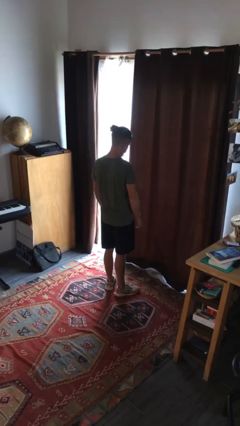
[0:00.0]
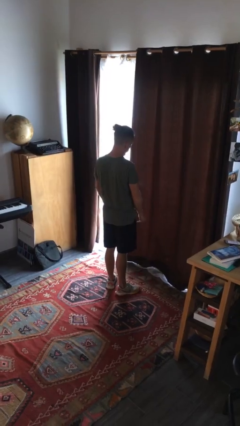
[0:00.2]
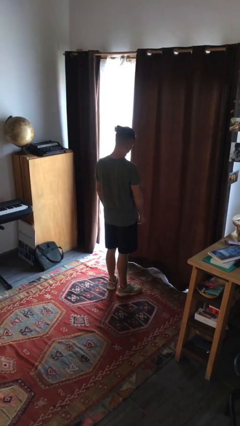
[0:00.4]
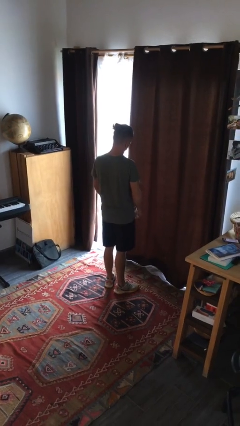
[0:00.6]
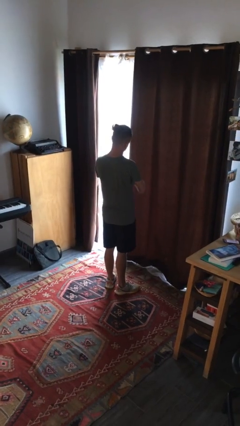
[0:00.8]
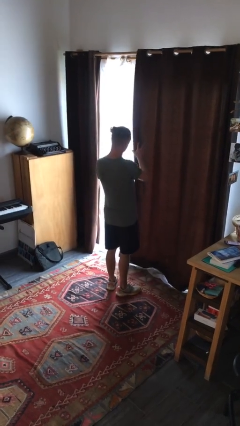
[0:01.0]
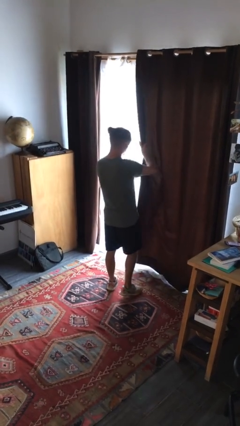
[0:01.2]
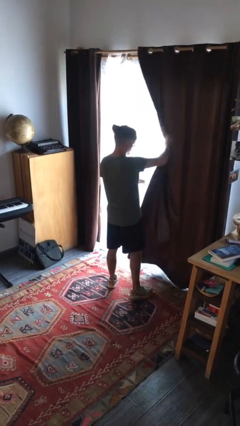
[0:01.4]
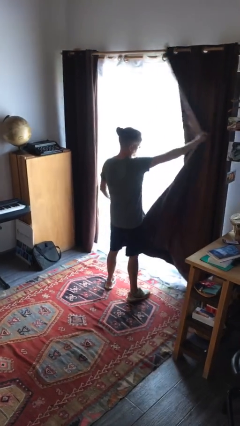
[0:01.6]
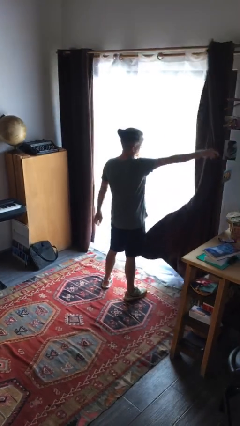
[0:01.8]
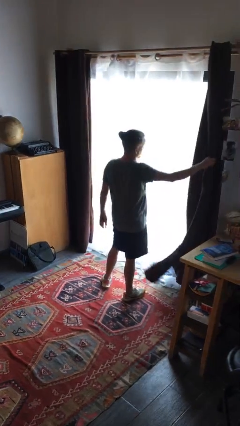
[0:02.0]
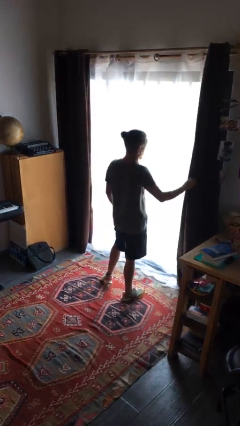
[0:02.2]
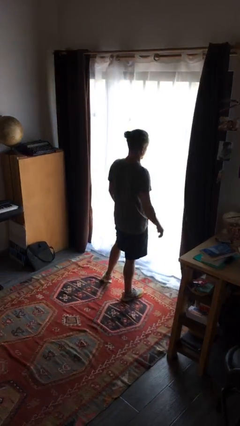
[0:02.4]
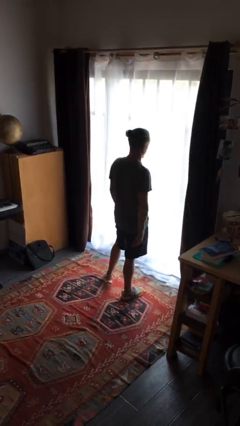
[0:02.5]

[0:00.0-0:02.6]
person opens curtains

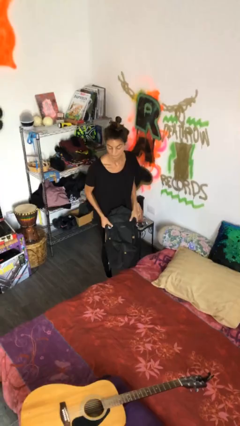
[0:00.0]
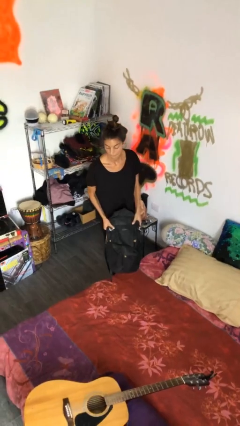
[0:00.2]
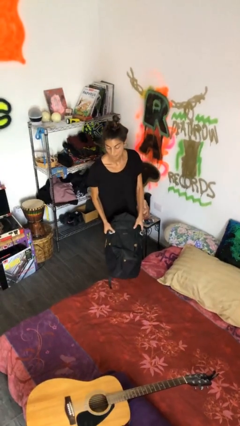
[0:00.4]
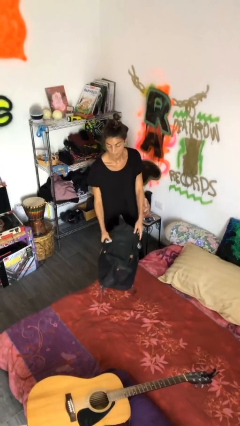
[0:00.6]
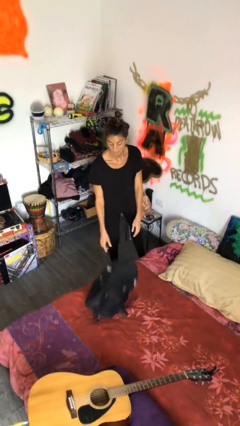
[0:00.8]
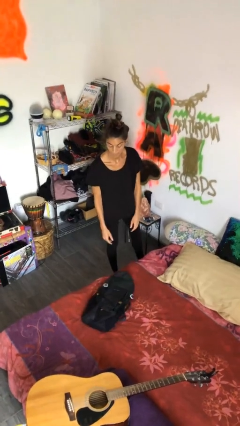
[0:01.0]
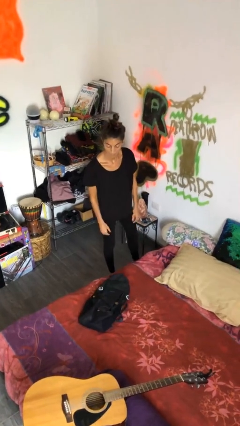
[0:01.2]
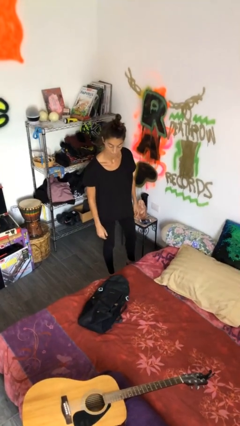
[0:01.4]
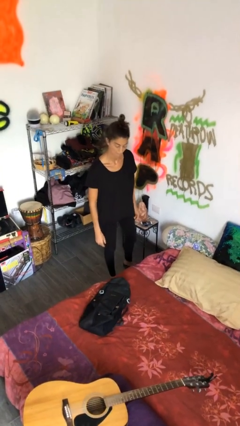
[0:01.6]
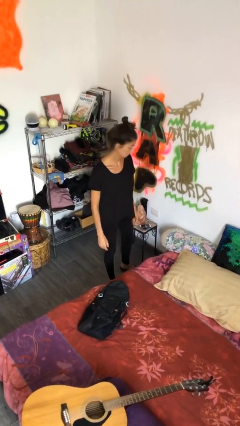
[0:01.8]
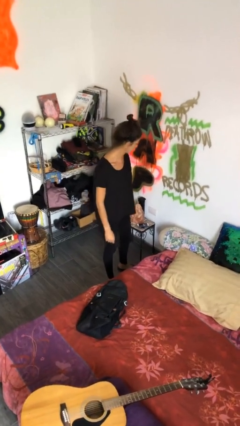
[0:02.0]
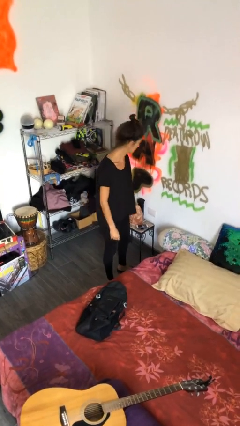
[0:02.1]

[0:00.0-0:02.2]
person puts down object on bed

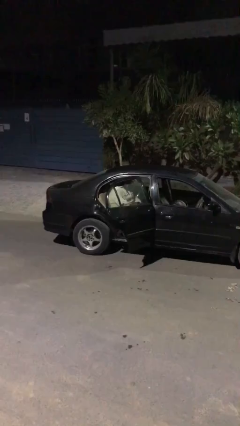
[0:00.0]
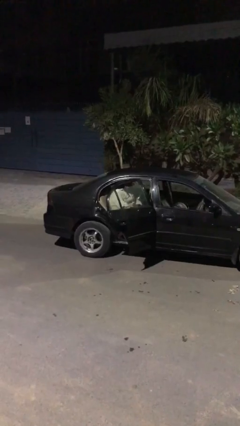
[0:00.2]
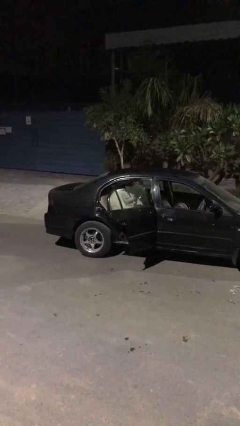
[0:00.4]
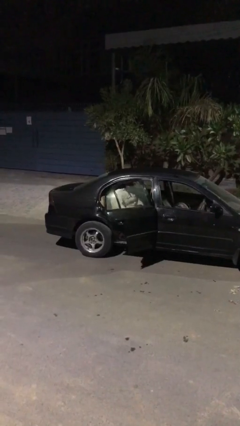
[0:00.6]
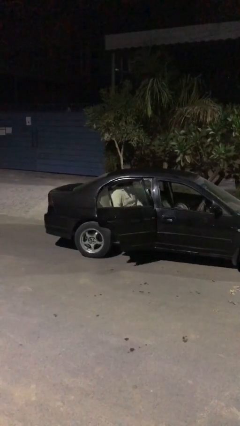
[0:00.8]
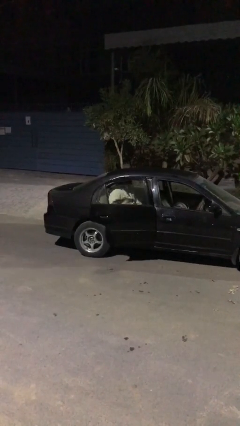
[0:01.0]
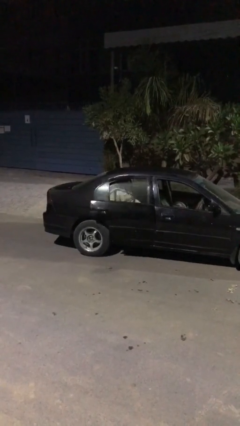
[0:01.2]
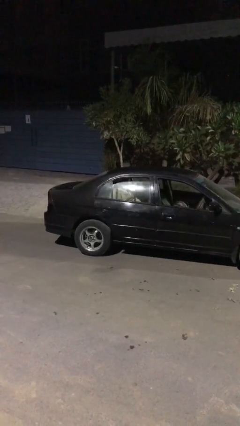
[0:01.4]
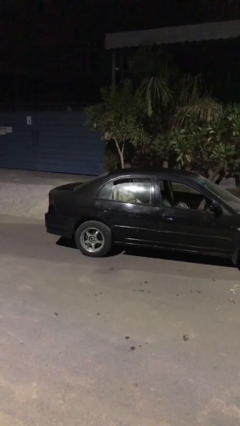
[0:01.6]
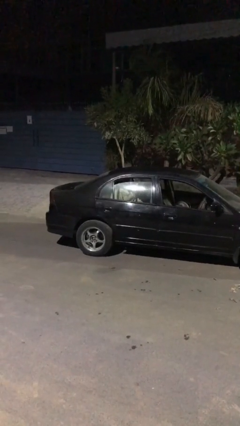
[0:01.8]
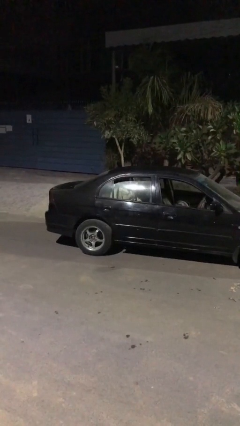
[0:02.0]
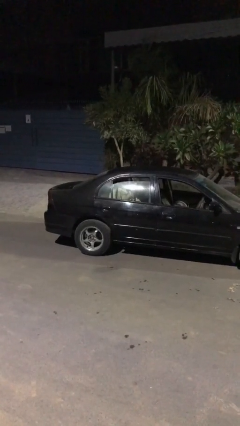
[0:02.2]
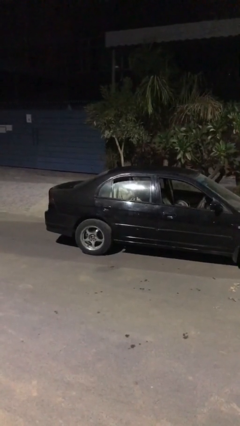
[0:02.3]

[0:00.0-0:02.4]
person closes car door

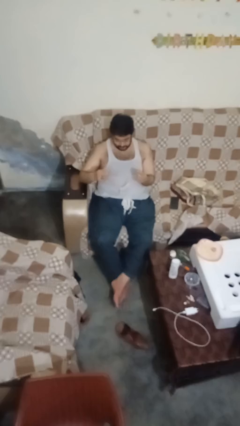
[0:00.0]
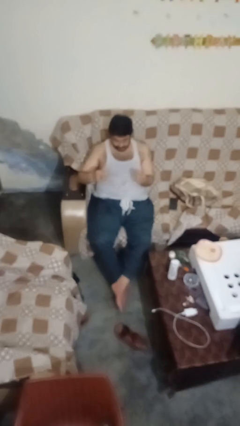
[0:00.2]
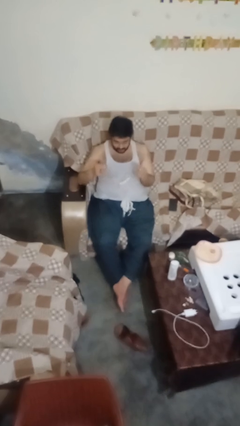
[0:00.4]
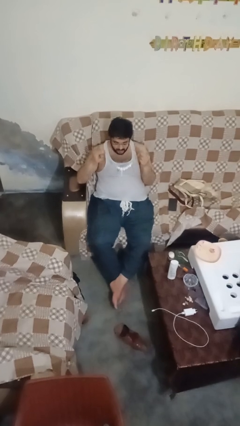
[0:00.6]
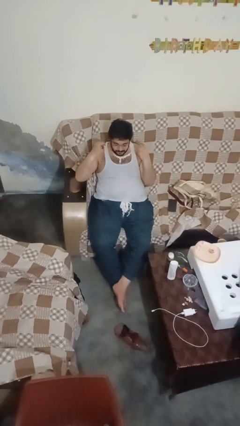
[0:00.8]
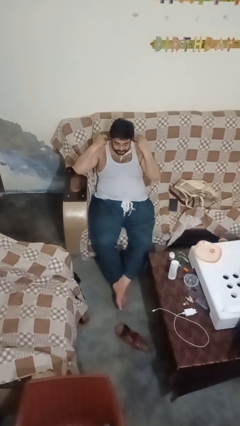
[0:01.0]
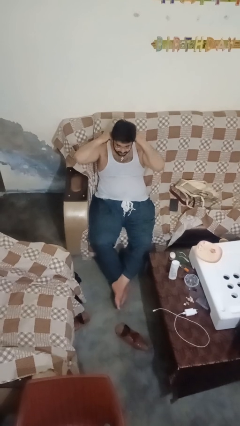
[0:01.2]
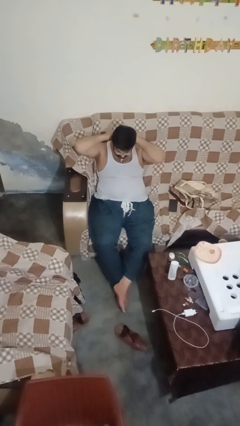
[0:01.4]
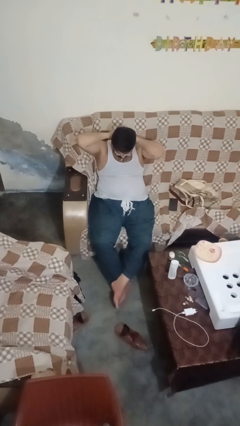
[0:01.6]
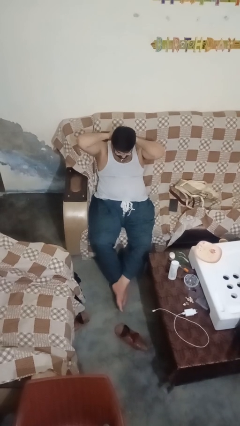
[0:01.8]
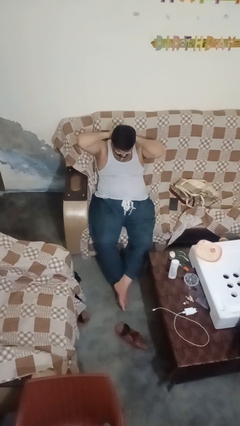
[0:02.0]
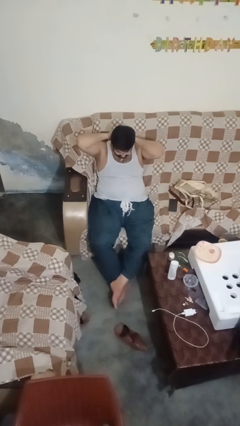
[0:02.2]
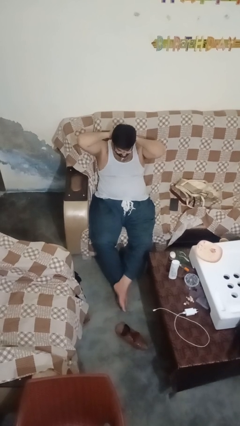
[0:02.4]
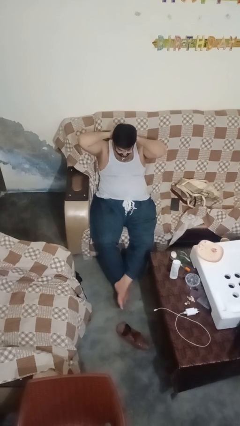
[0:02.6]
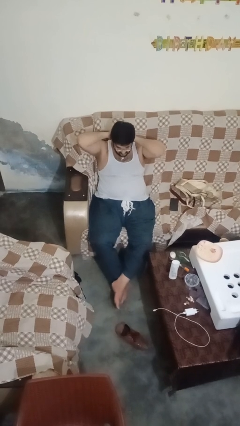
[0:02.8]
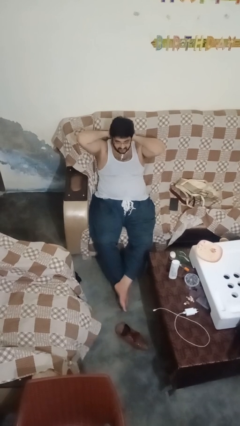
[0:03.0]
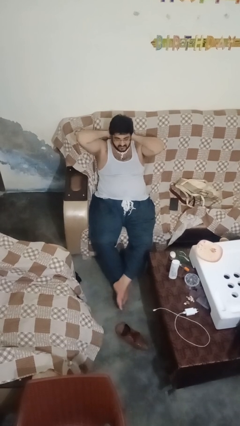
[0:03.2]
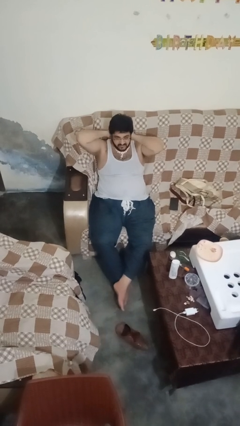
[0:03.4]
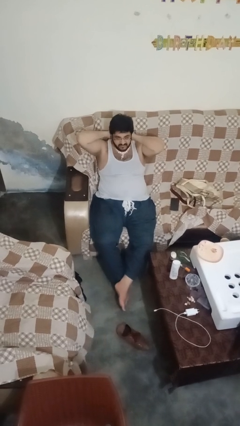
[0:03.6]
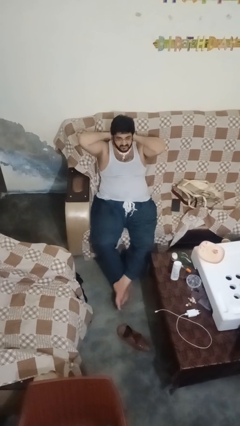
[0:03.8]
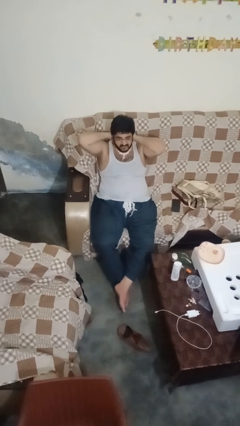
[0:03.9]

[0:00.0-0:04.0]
person puts on necklace

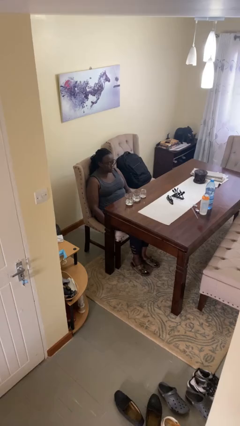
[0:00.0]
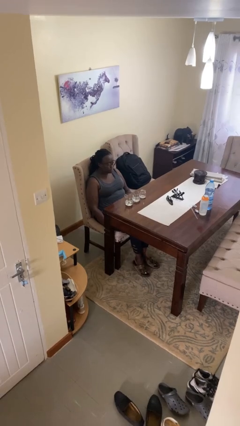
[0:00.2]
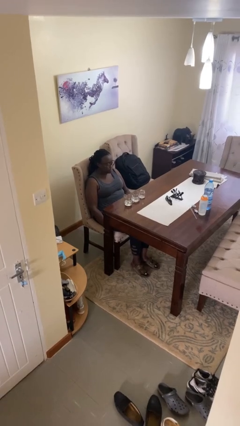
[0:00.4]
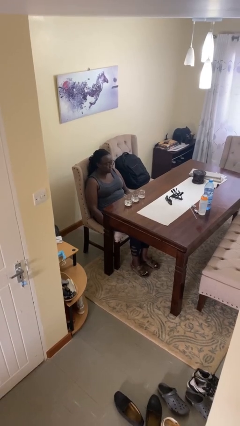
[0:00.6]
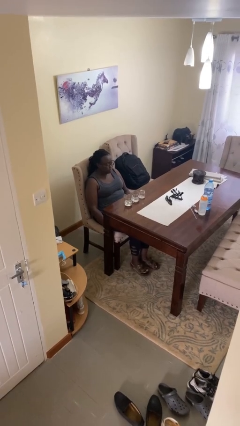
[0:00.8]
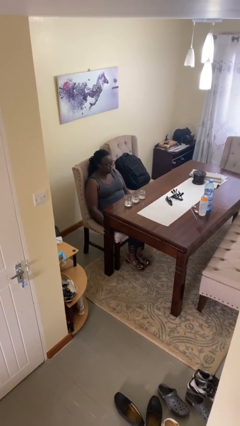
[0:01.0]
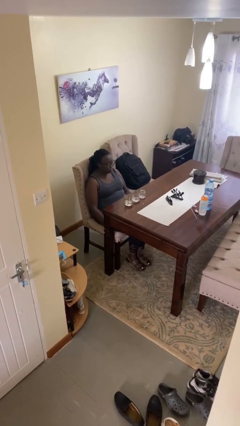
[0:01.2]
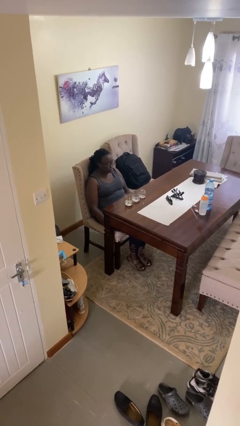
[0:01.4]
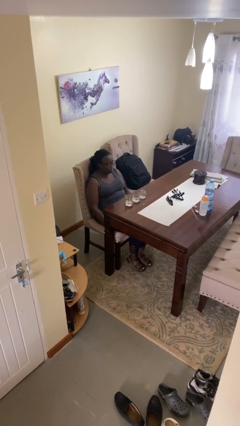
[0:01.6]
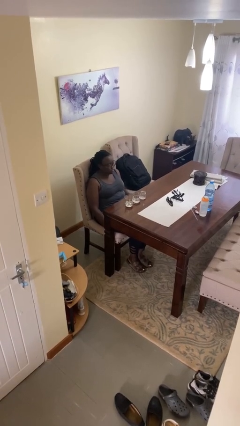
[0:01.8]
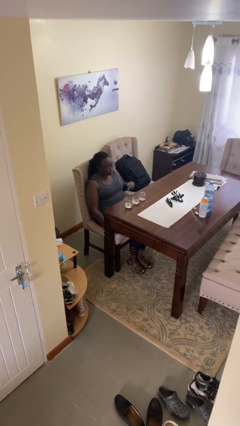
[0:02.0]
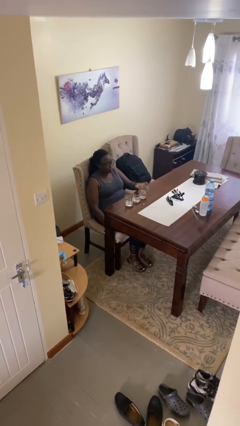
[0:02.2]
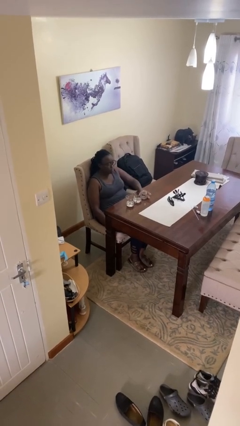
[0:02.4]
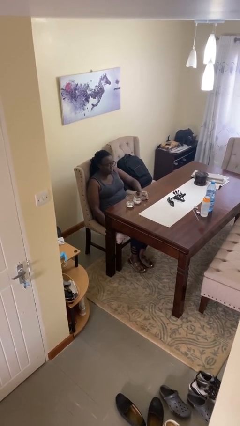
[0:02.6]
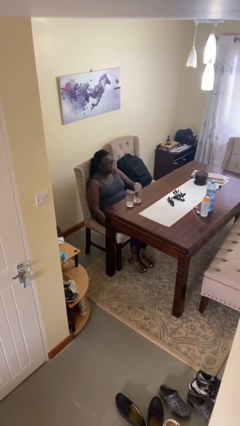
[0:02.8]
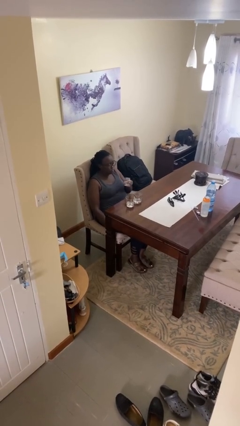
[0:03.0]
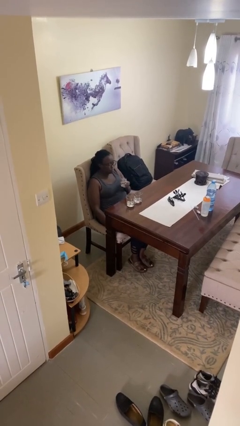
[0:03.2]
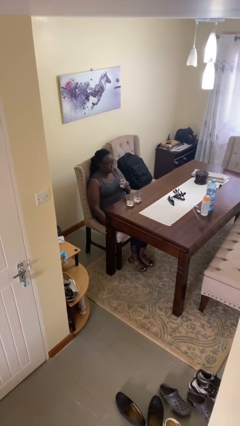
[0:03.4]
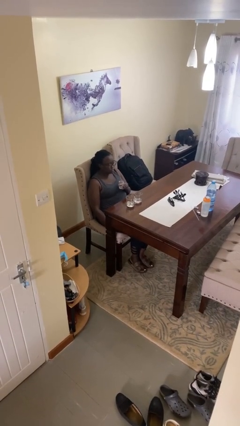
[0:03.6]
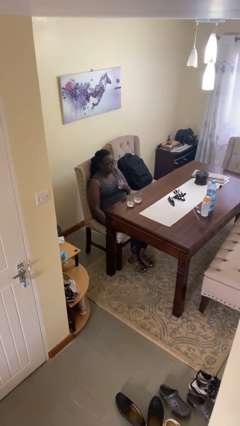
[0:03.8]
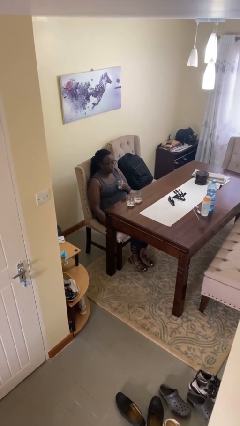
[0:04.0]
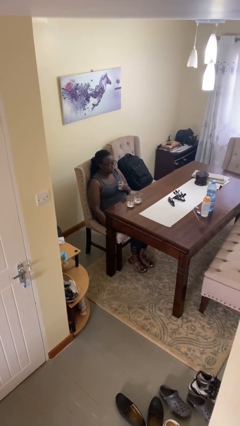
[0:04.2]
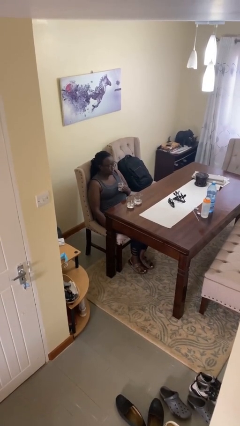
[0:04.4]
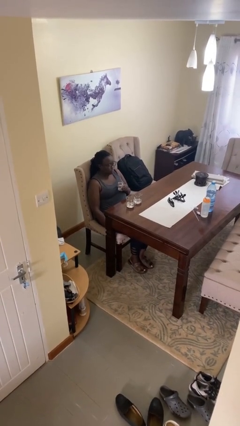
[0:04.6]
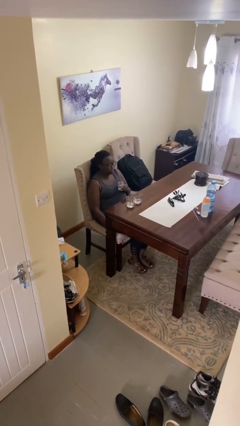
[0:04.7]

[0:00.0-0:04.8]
person picks up object from table

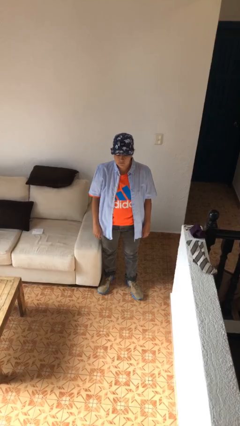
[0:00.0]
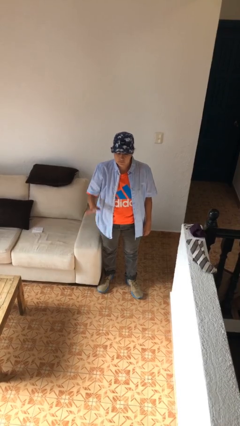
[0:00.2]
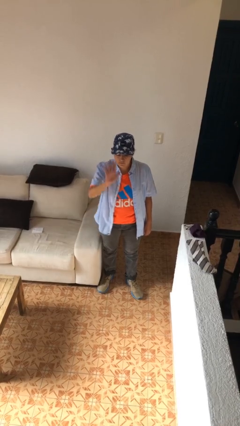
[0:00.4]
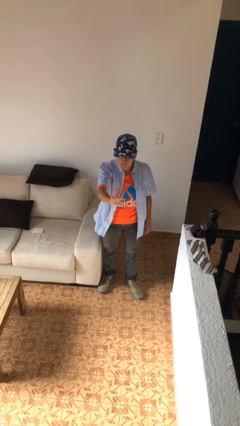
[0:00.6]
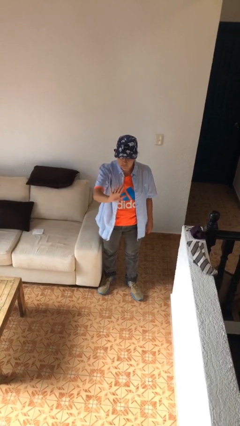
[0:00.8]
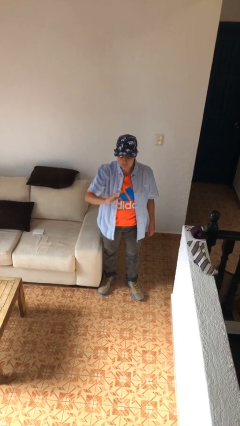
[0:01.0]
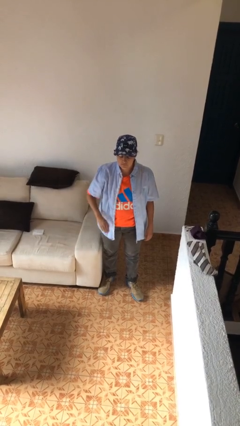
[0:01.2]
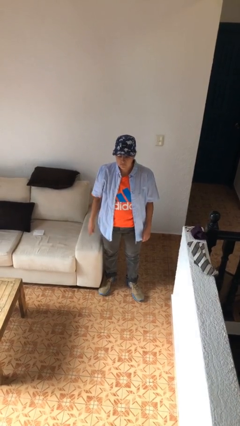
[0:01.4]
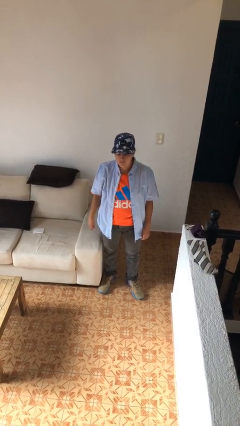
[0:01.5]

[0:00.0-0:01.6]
person gestures stop
